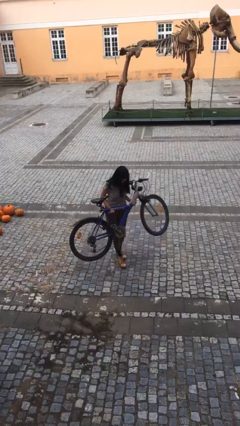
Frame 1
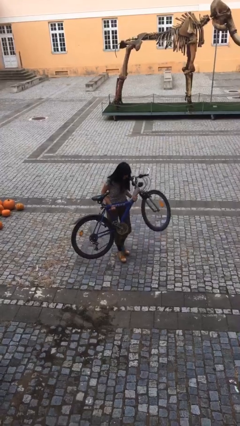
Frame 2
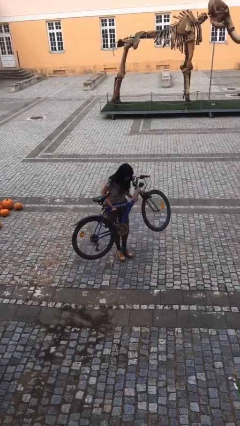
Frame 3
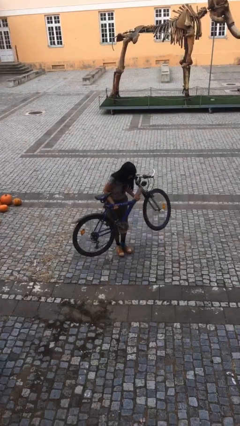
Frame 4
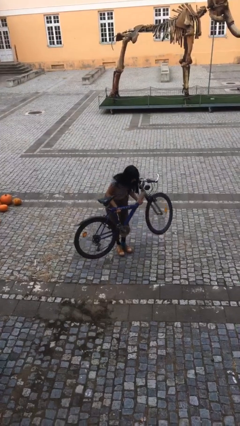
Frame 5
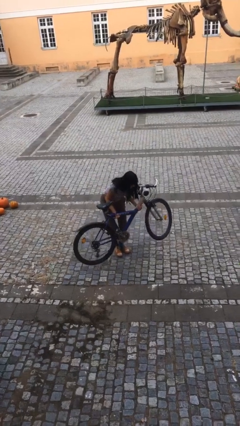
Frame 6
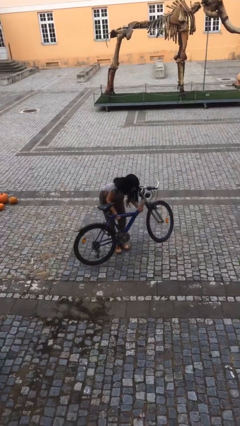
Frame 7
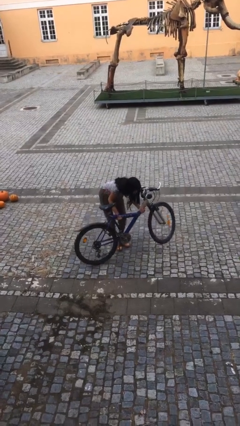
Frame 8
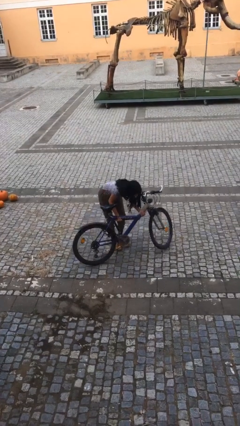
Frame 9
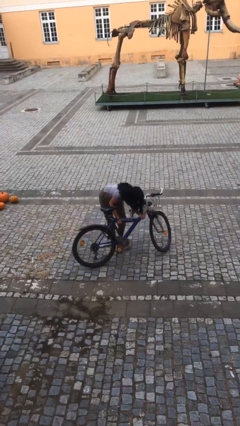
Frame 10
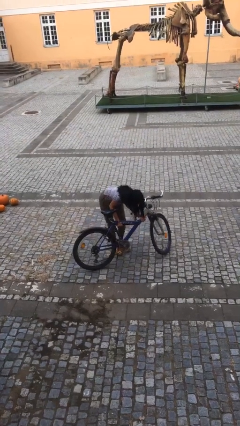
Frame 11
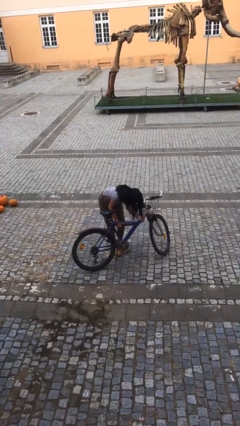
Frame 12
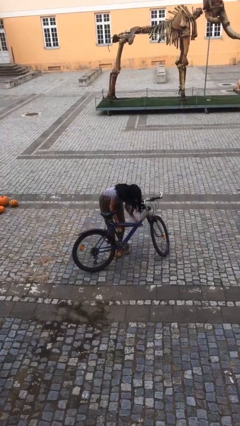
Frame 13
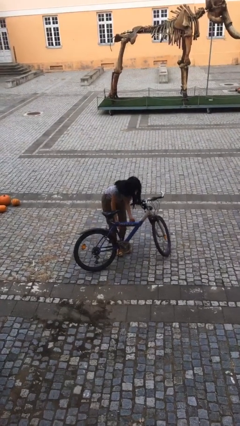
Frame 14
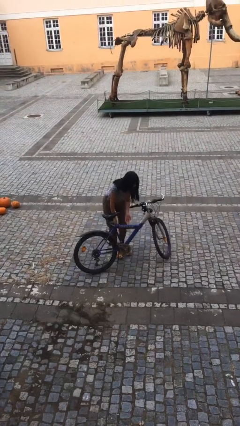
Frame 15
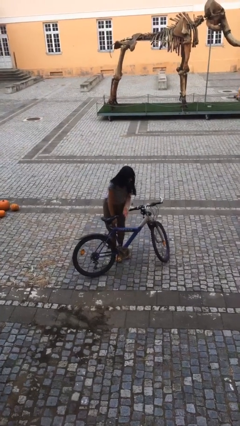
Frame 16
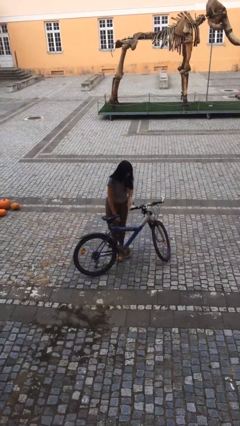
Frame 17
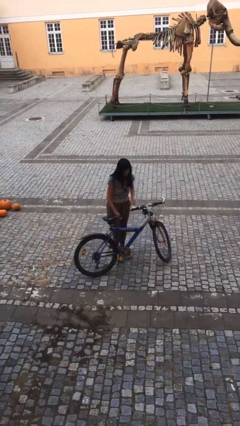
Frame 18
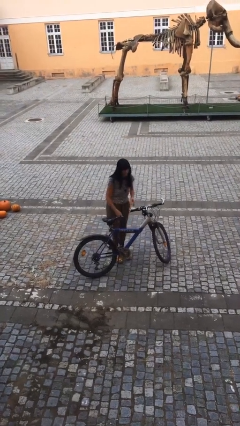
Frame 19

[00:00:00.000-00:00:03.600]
person puts down object on floor

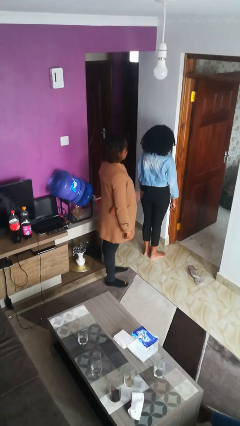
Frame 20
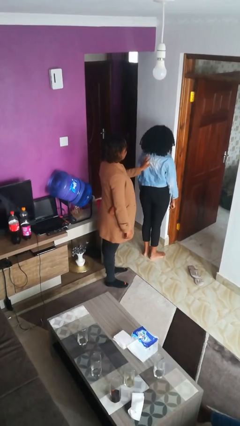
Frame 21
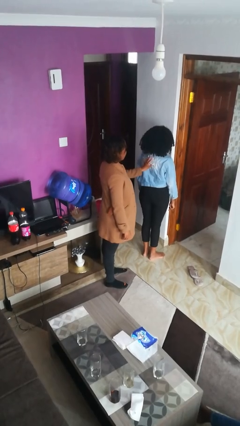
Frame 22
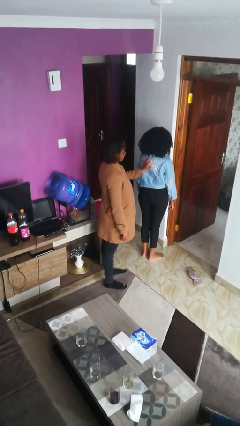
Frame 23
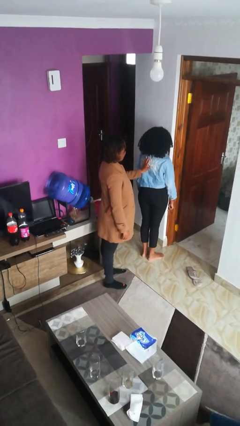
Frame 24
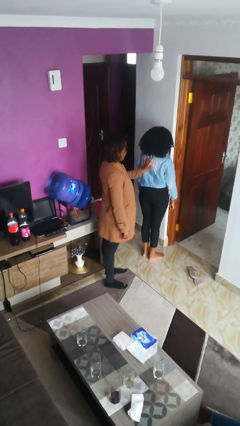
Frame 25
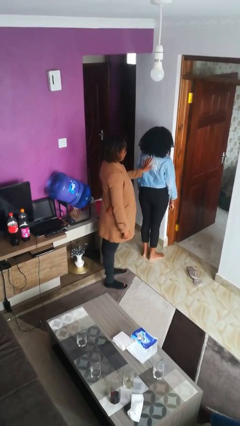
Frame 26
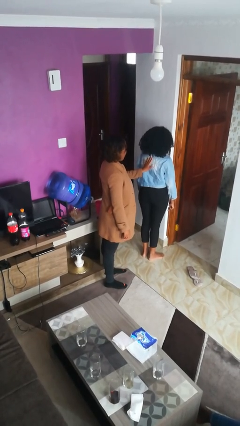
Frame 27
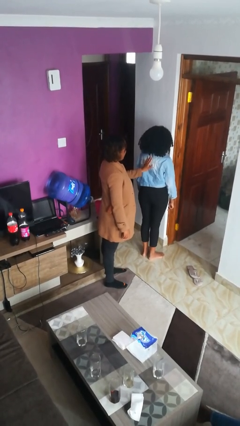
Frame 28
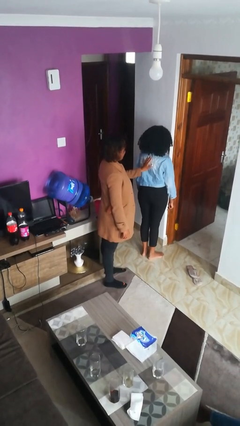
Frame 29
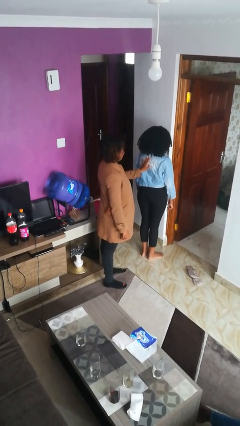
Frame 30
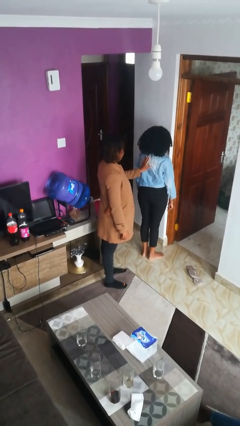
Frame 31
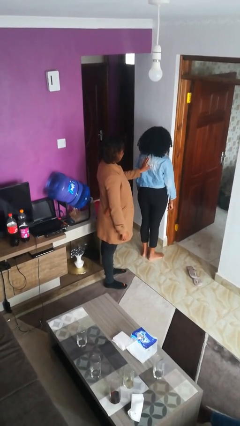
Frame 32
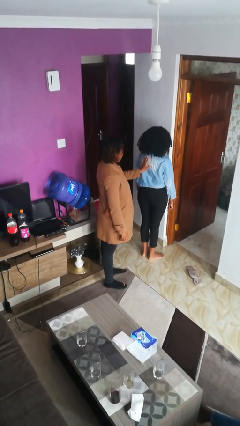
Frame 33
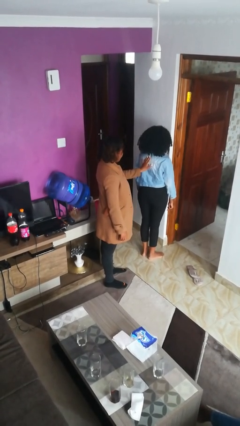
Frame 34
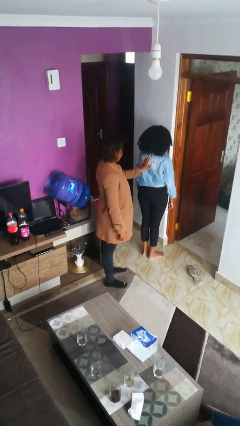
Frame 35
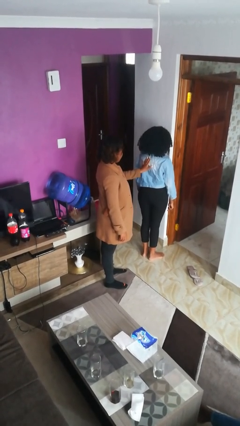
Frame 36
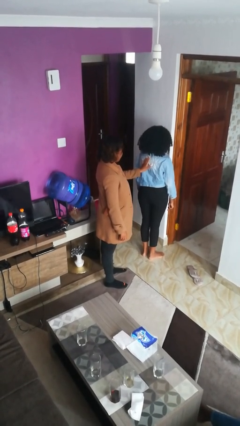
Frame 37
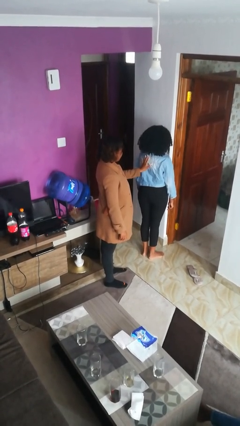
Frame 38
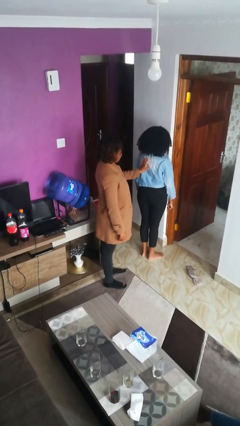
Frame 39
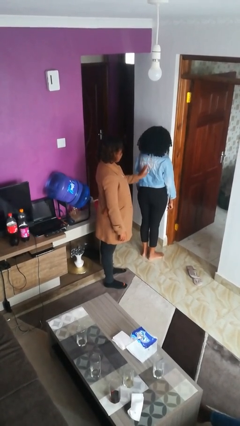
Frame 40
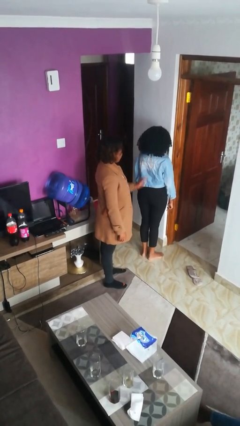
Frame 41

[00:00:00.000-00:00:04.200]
person touches back of person

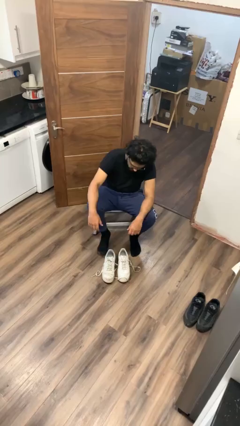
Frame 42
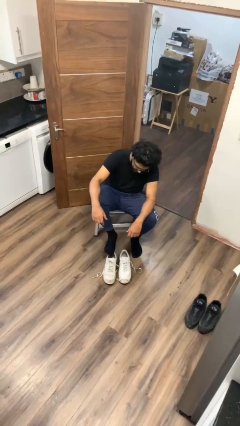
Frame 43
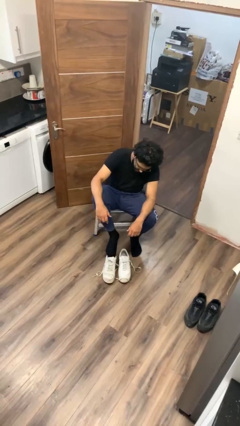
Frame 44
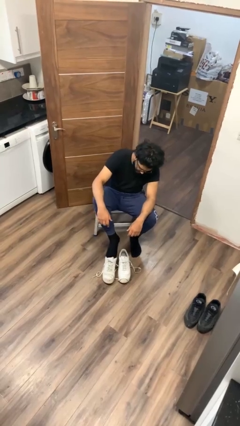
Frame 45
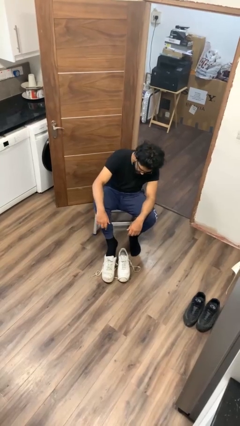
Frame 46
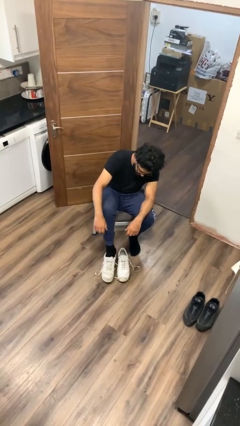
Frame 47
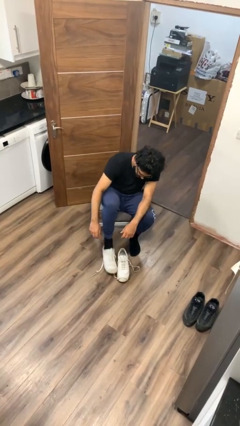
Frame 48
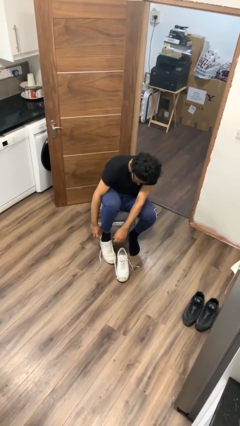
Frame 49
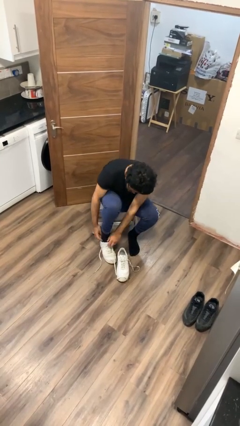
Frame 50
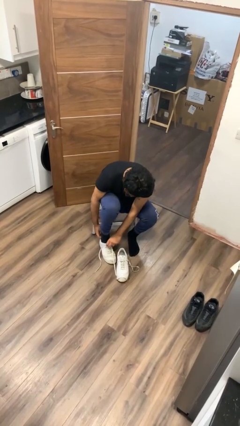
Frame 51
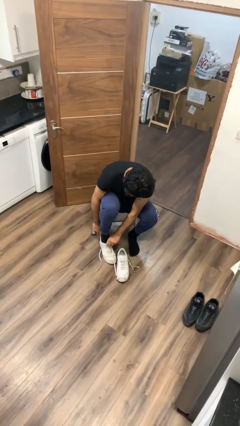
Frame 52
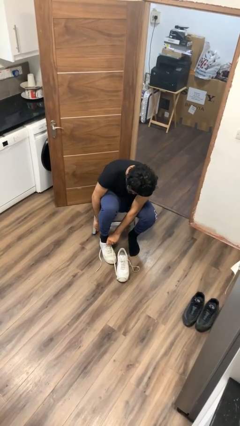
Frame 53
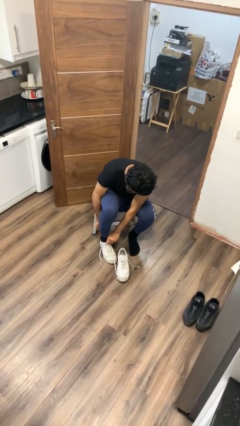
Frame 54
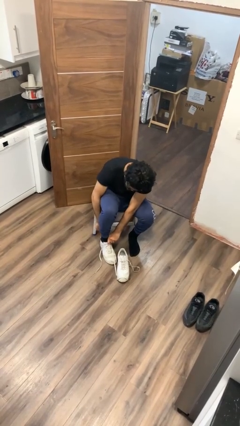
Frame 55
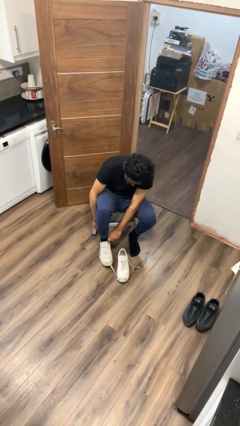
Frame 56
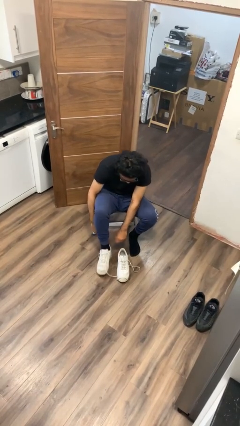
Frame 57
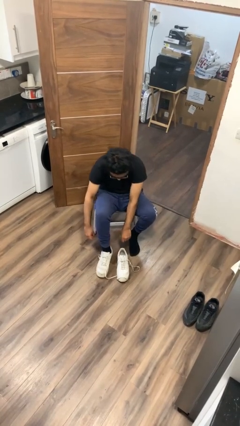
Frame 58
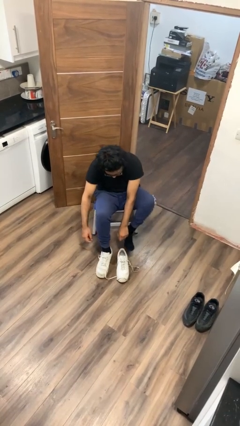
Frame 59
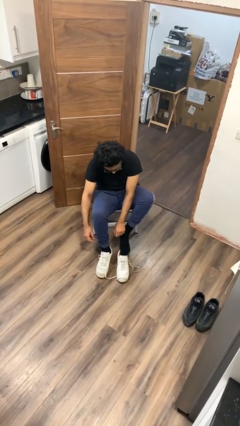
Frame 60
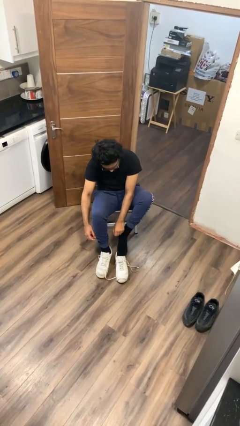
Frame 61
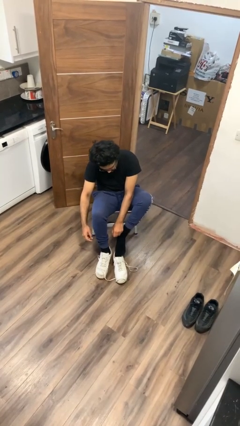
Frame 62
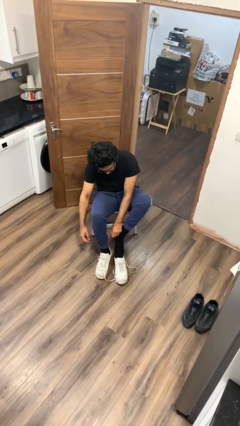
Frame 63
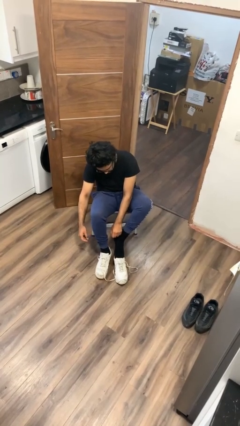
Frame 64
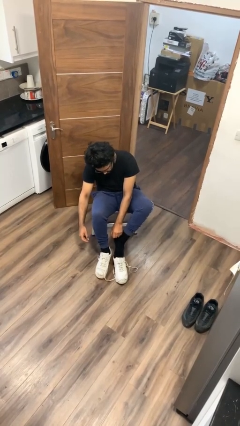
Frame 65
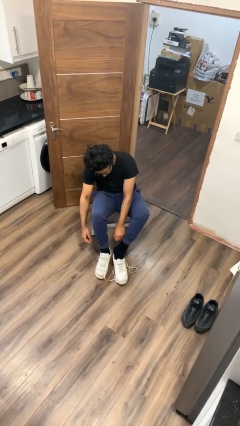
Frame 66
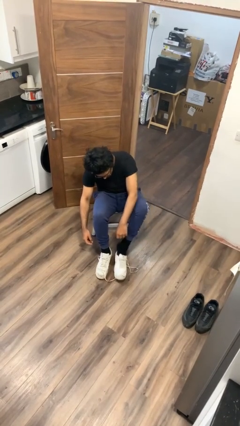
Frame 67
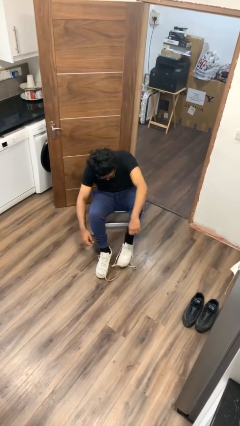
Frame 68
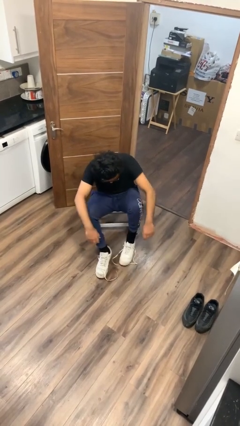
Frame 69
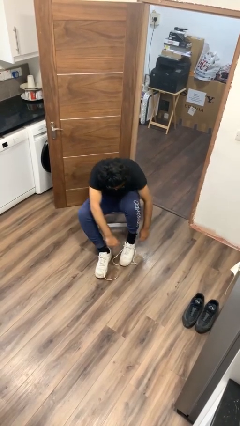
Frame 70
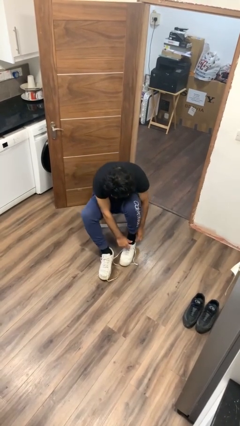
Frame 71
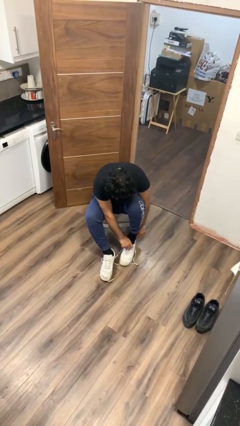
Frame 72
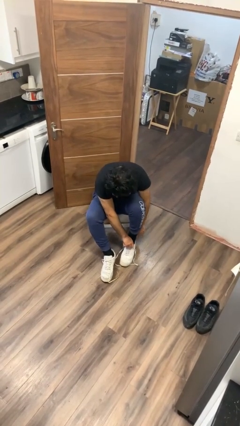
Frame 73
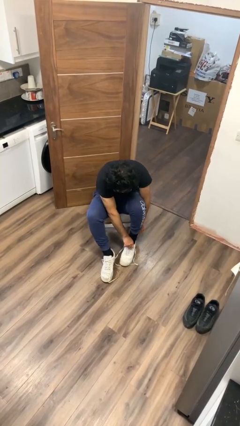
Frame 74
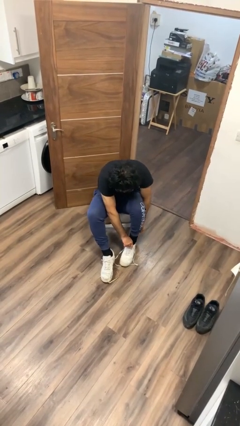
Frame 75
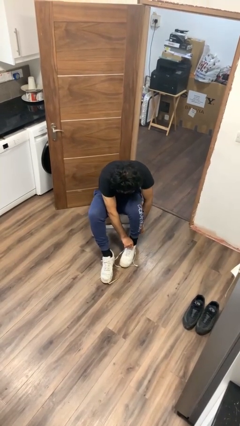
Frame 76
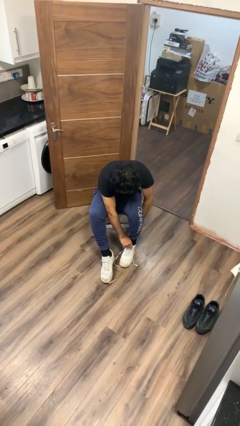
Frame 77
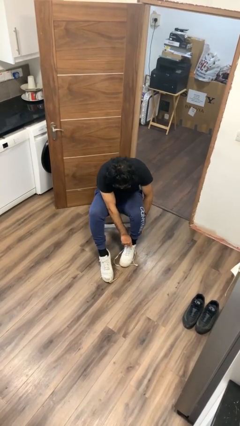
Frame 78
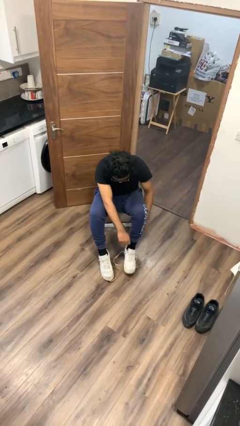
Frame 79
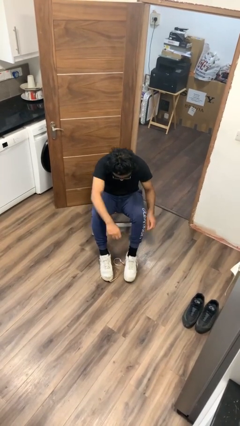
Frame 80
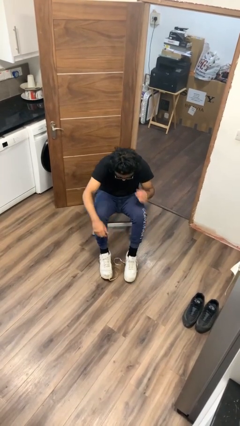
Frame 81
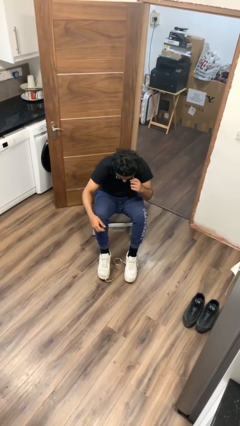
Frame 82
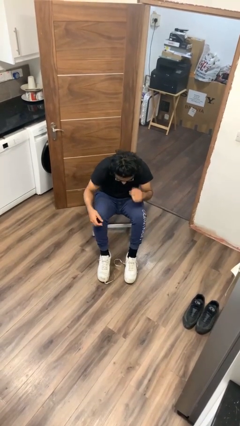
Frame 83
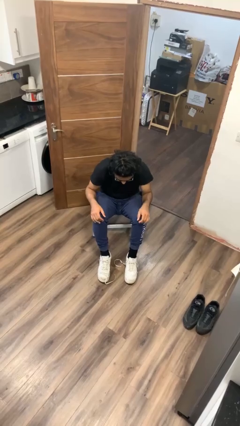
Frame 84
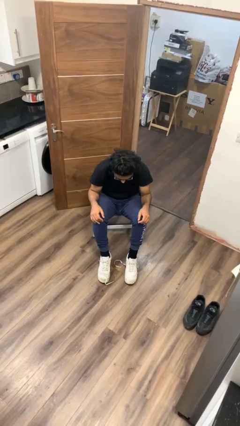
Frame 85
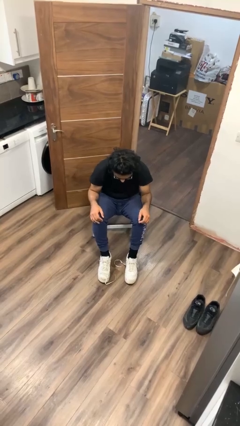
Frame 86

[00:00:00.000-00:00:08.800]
person puts on shoes

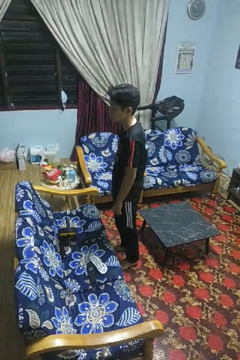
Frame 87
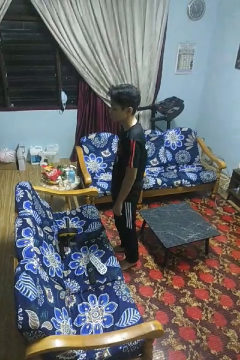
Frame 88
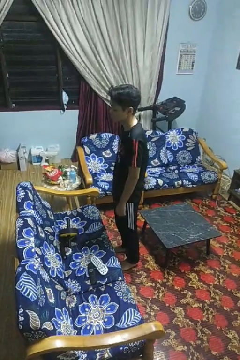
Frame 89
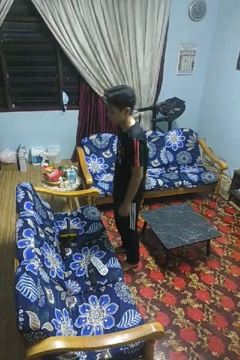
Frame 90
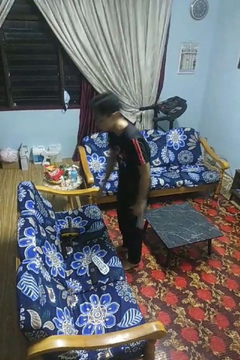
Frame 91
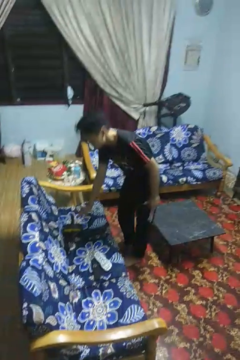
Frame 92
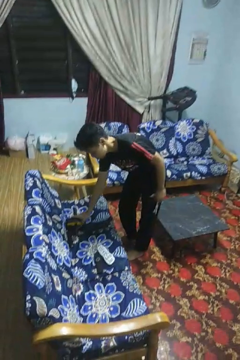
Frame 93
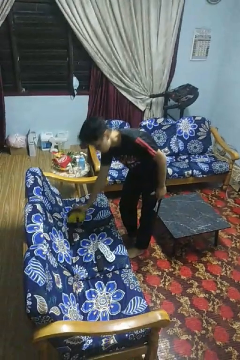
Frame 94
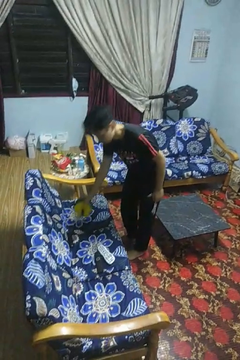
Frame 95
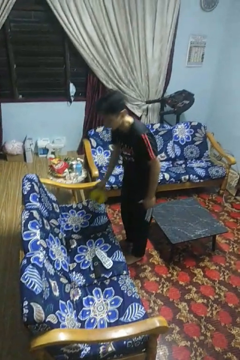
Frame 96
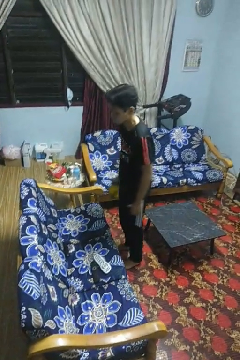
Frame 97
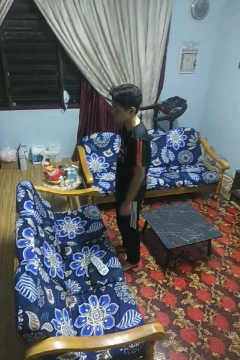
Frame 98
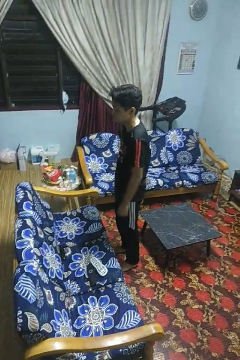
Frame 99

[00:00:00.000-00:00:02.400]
person picks up object from couch
